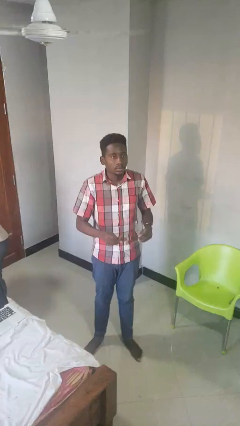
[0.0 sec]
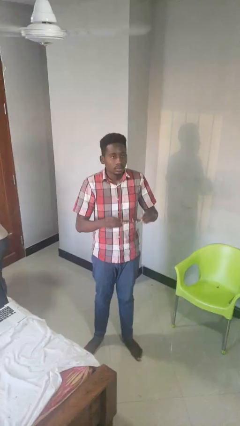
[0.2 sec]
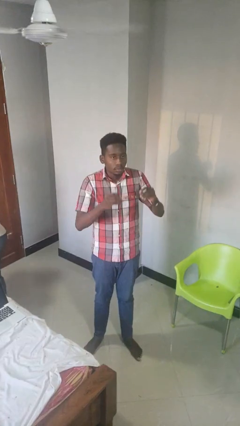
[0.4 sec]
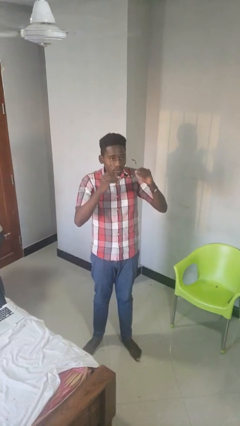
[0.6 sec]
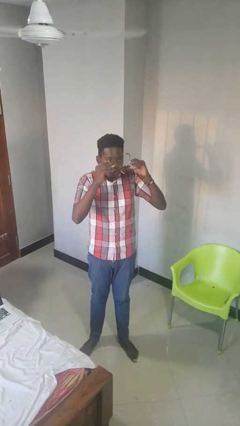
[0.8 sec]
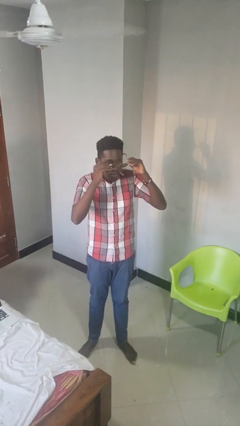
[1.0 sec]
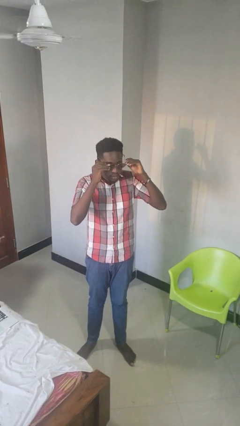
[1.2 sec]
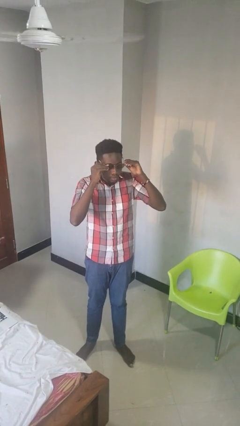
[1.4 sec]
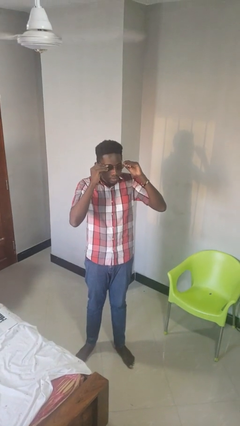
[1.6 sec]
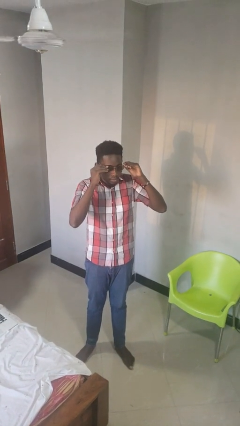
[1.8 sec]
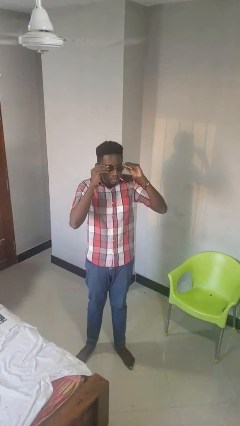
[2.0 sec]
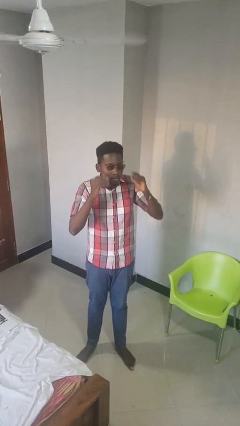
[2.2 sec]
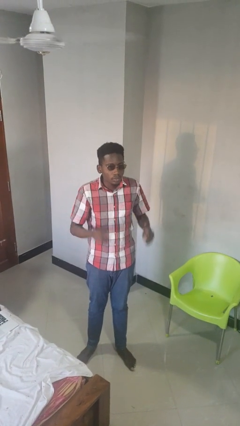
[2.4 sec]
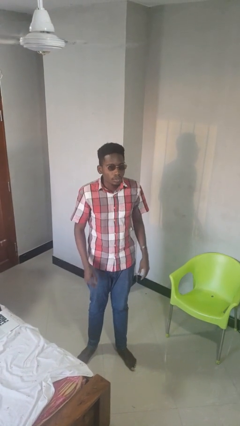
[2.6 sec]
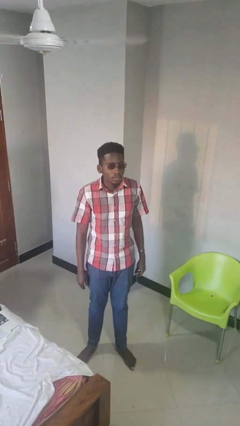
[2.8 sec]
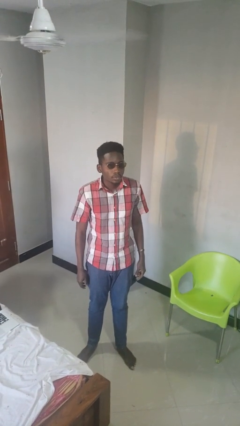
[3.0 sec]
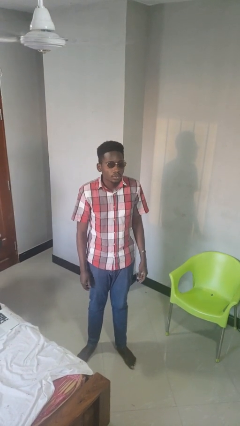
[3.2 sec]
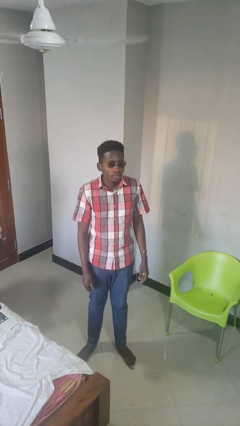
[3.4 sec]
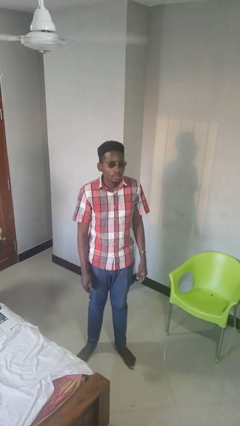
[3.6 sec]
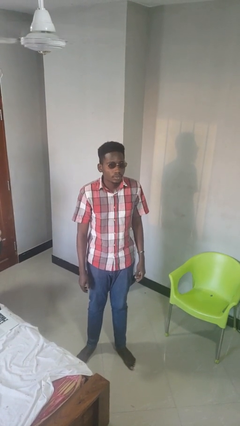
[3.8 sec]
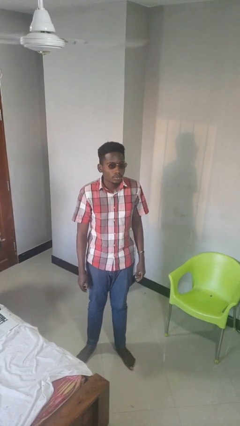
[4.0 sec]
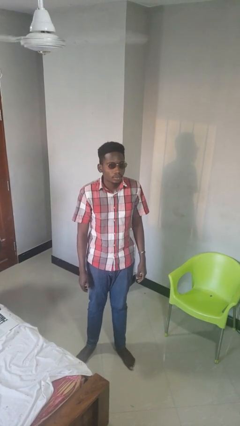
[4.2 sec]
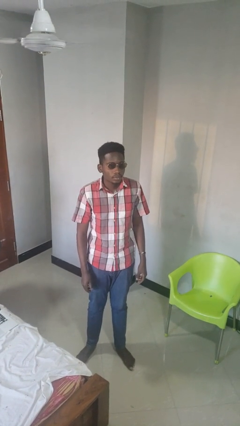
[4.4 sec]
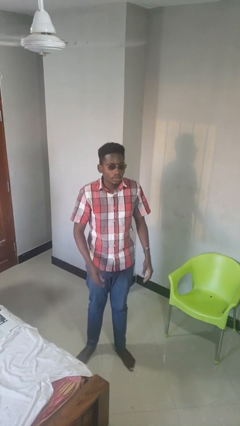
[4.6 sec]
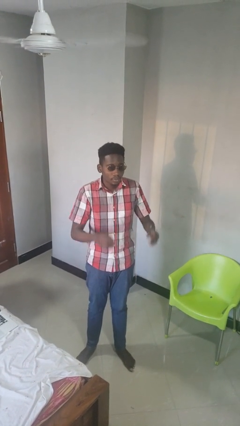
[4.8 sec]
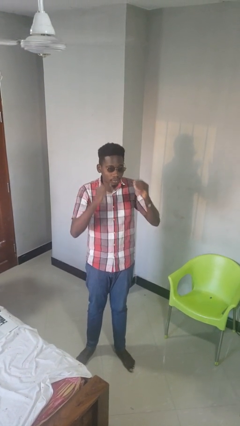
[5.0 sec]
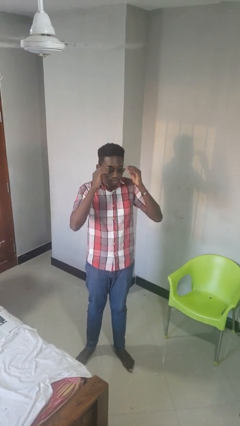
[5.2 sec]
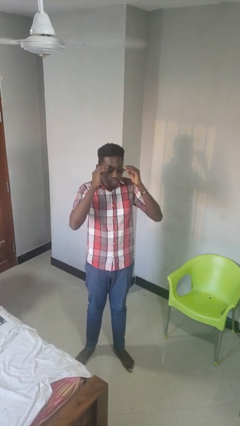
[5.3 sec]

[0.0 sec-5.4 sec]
person puts on sunglasses

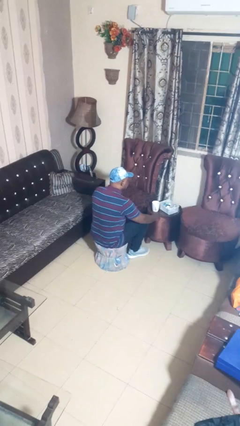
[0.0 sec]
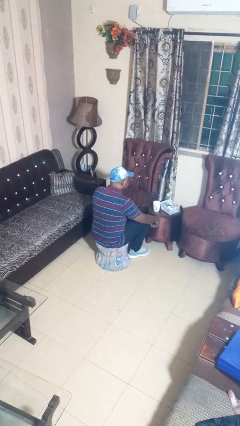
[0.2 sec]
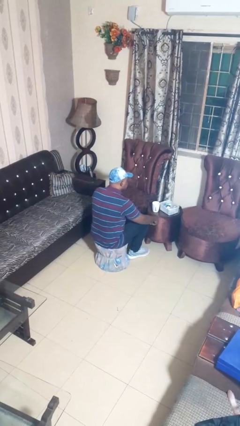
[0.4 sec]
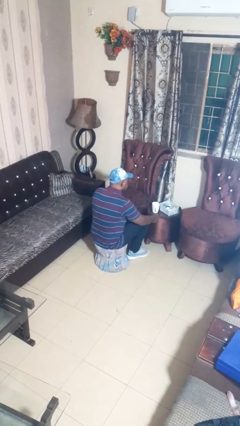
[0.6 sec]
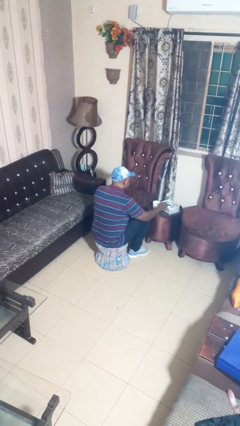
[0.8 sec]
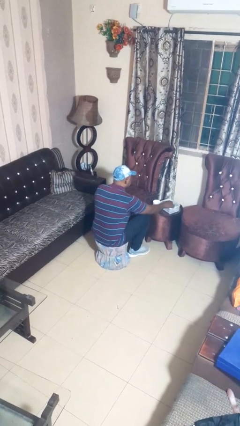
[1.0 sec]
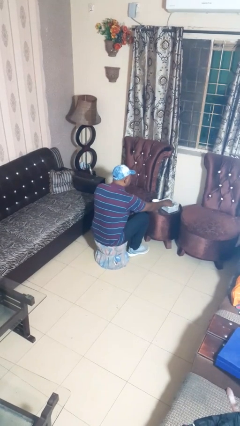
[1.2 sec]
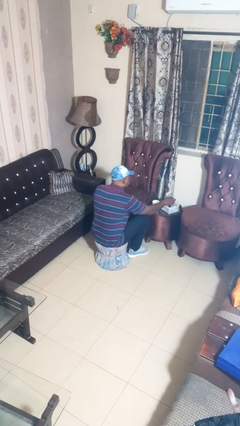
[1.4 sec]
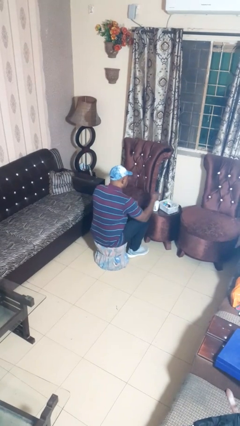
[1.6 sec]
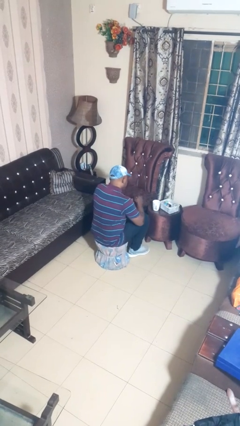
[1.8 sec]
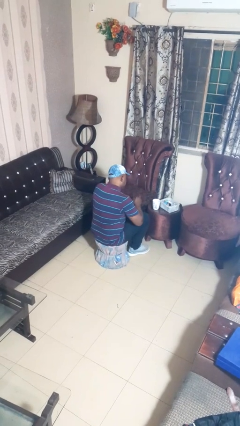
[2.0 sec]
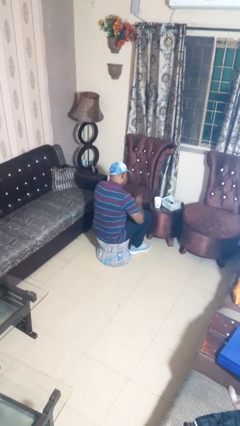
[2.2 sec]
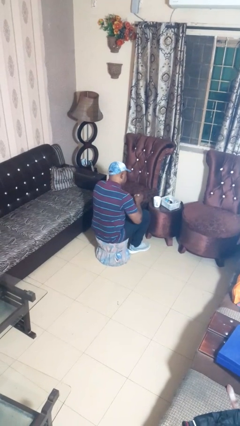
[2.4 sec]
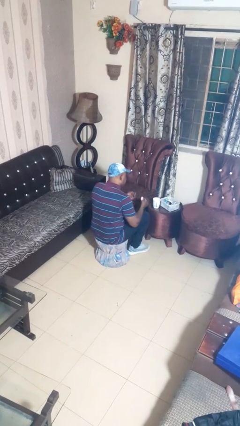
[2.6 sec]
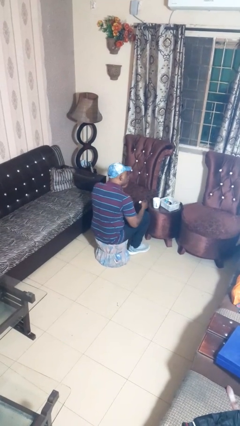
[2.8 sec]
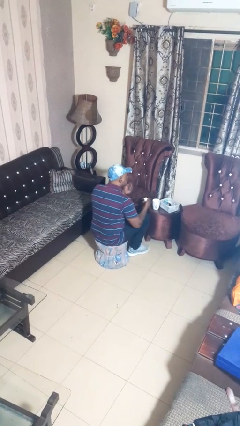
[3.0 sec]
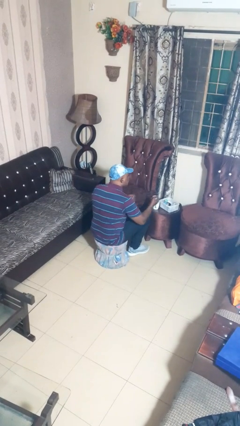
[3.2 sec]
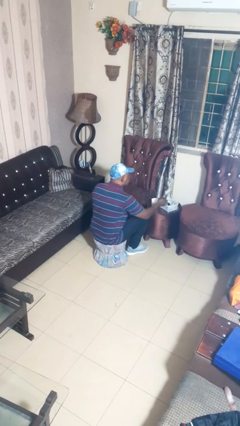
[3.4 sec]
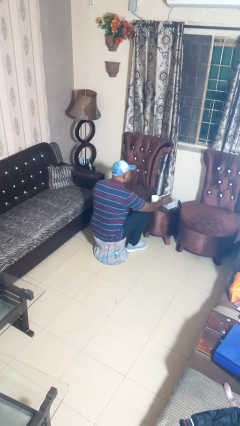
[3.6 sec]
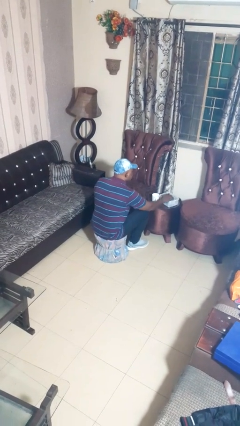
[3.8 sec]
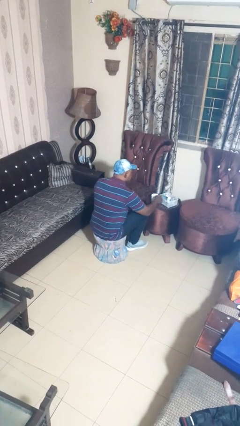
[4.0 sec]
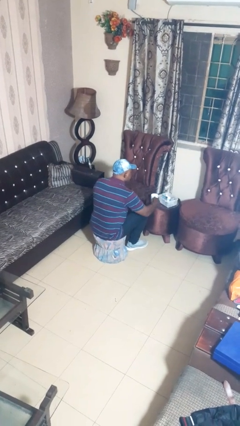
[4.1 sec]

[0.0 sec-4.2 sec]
person takes medicine pills

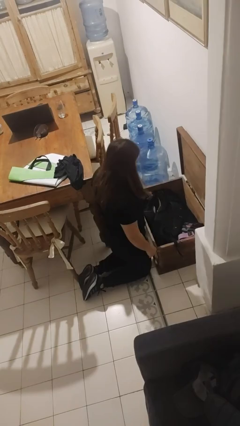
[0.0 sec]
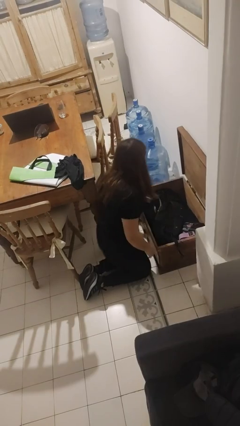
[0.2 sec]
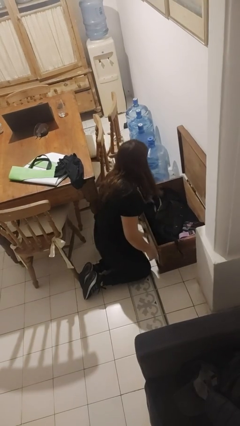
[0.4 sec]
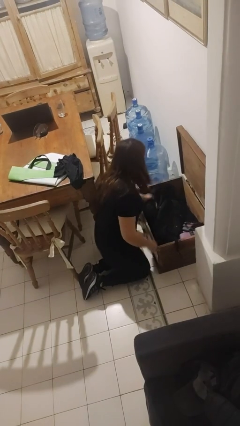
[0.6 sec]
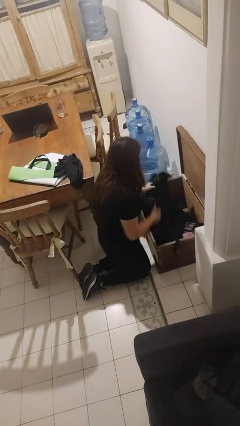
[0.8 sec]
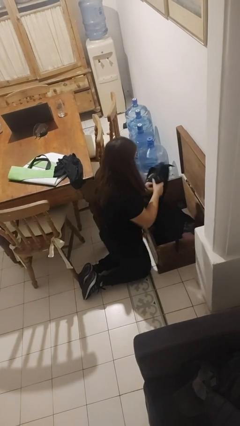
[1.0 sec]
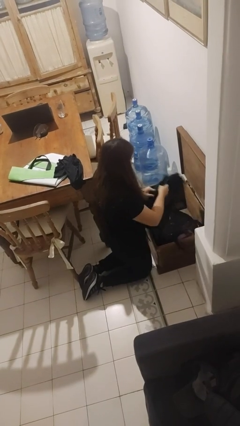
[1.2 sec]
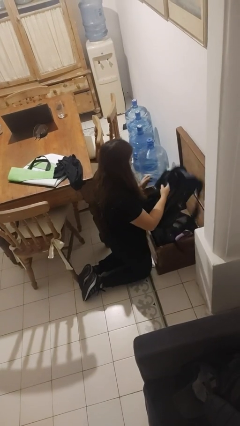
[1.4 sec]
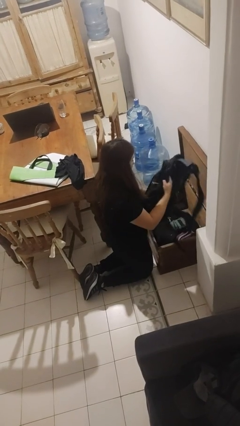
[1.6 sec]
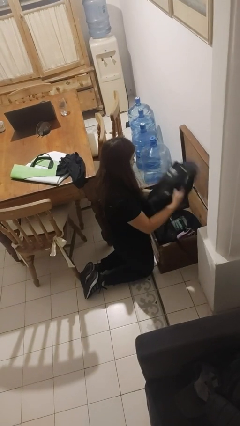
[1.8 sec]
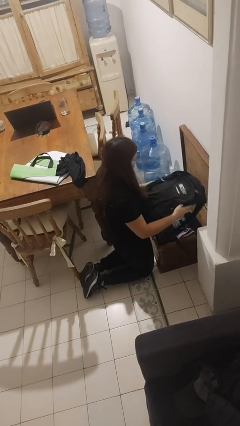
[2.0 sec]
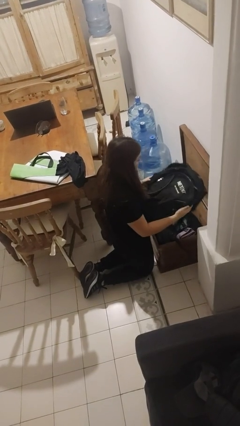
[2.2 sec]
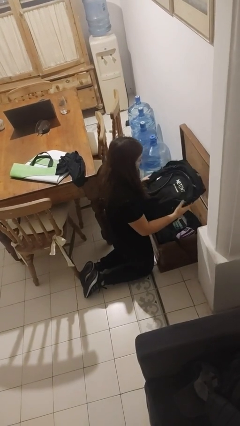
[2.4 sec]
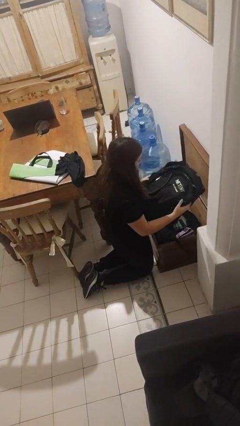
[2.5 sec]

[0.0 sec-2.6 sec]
person takes object from box

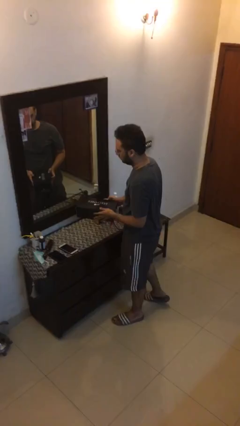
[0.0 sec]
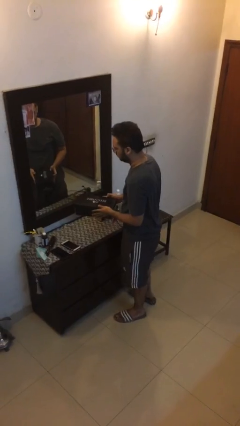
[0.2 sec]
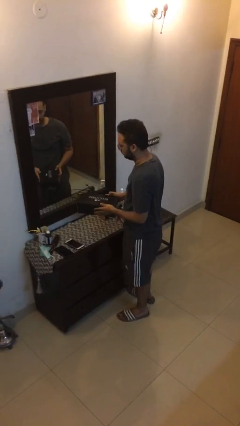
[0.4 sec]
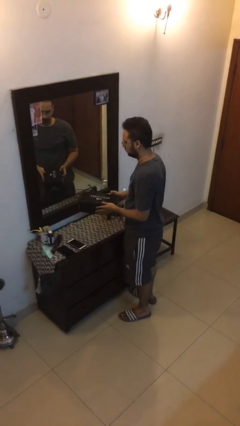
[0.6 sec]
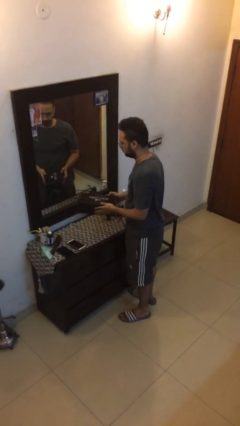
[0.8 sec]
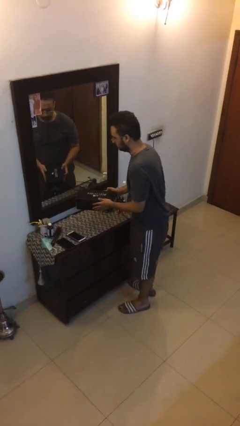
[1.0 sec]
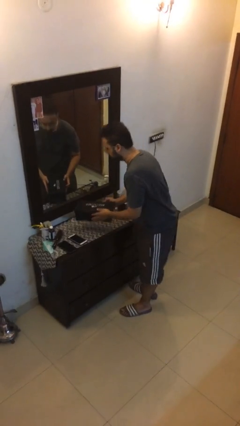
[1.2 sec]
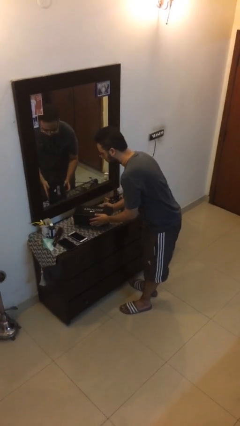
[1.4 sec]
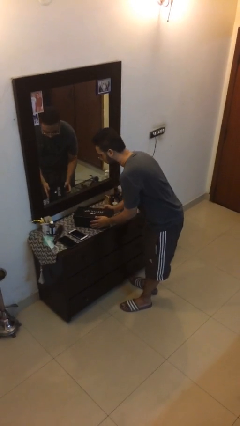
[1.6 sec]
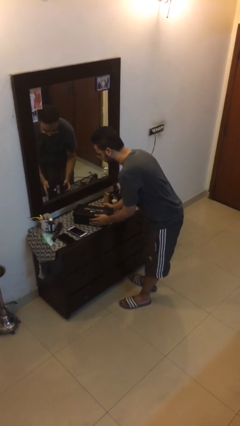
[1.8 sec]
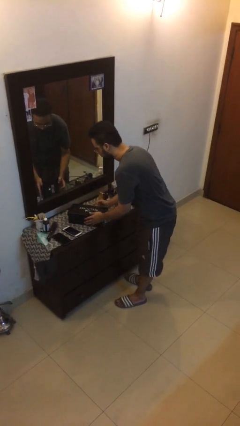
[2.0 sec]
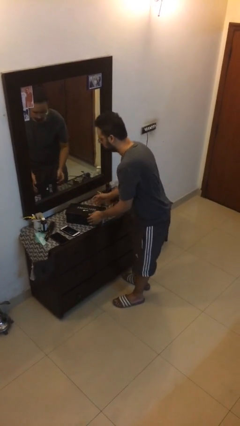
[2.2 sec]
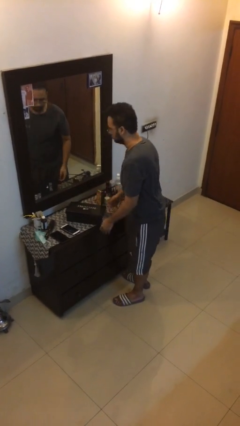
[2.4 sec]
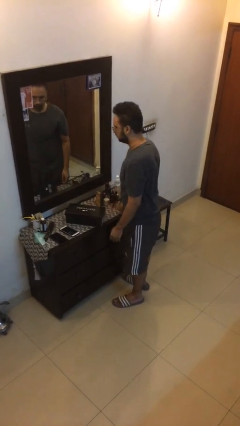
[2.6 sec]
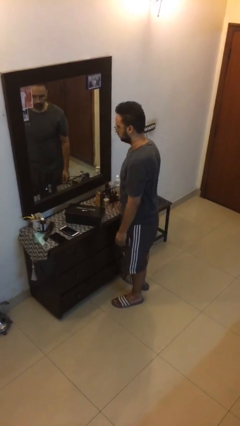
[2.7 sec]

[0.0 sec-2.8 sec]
person puts down object on table

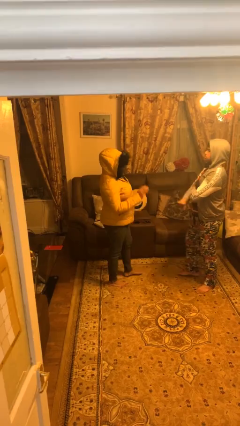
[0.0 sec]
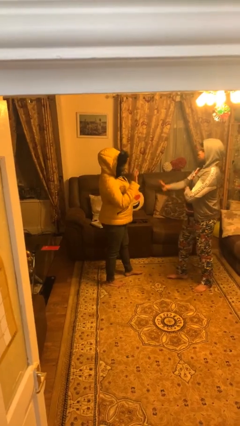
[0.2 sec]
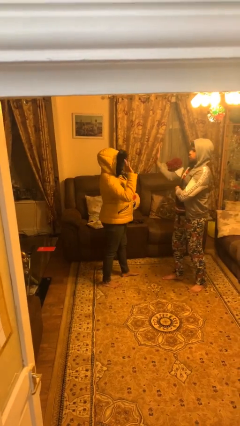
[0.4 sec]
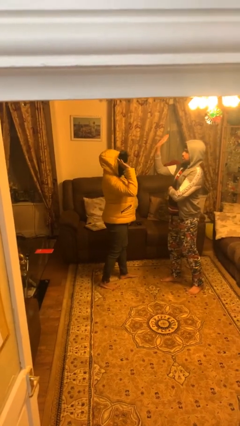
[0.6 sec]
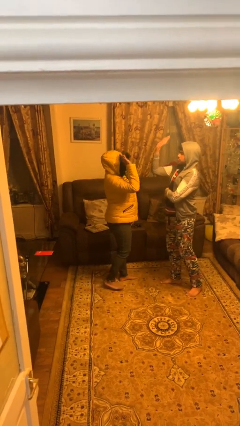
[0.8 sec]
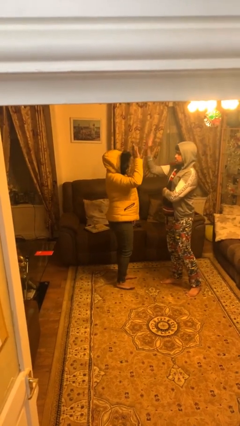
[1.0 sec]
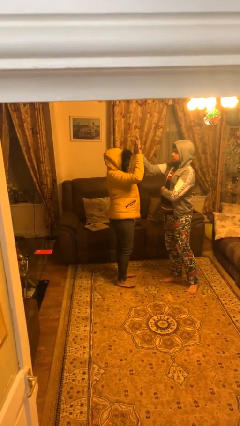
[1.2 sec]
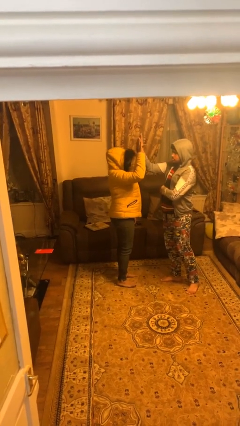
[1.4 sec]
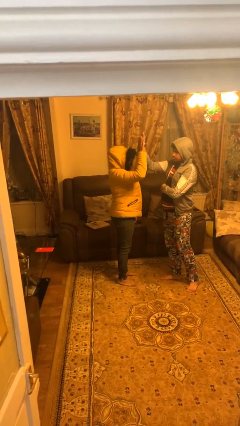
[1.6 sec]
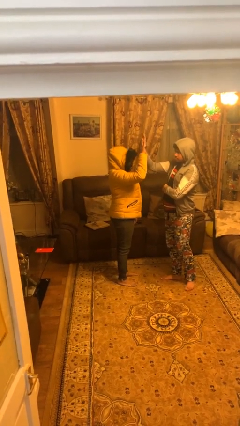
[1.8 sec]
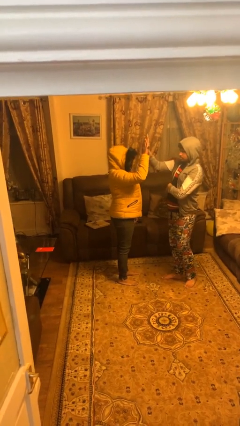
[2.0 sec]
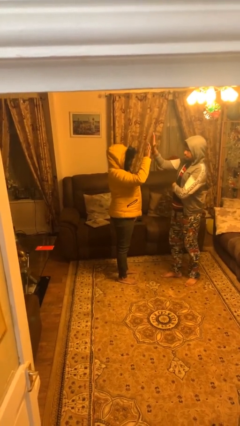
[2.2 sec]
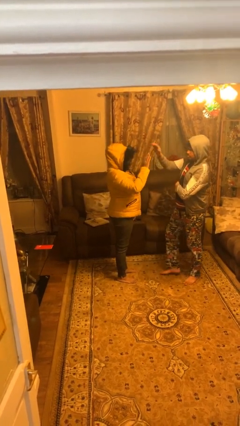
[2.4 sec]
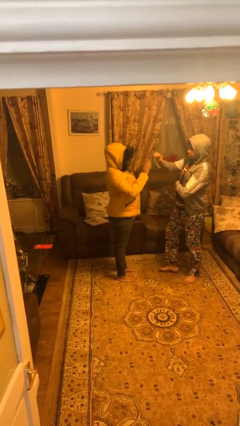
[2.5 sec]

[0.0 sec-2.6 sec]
person highfives hand
